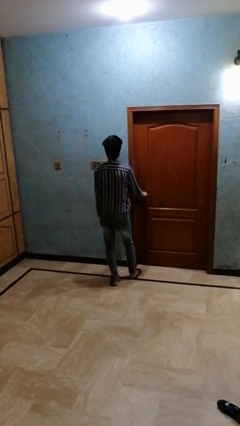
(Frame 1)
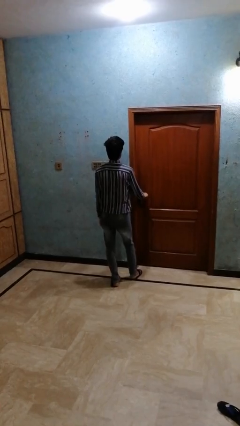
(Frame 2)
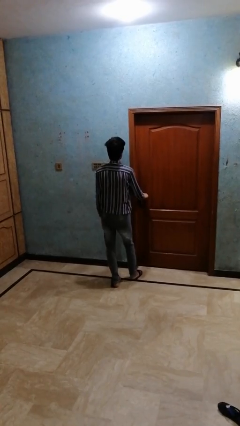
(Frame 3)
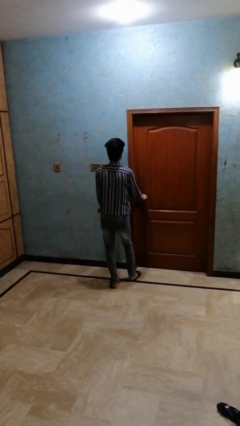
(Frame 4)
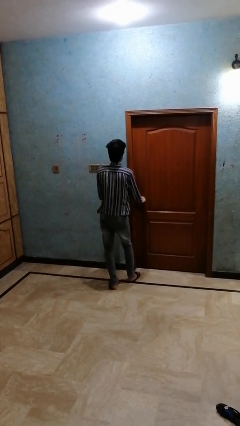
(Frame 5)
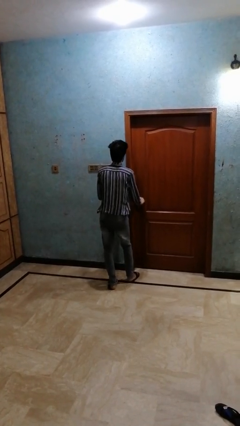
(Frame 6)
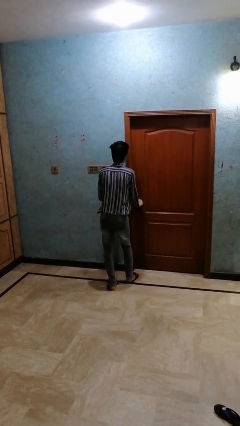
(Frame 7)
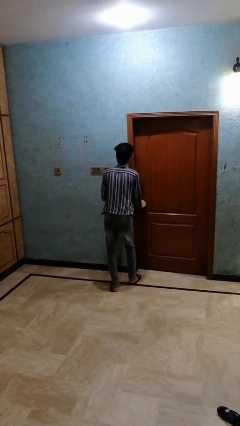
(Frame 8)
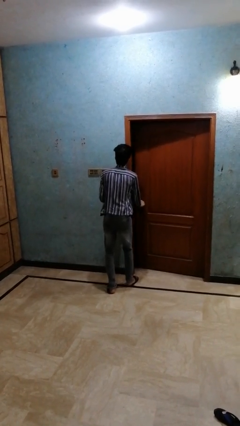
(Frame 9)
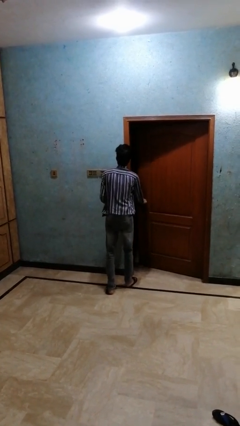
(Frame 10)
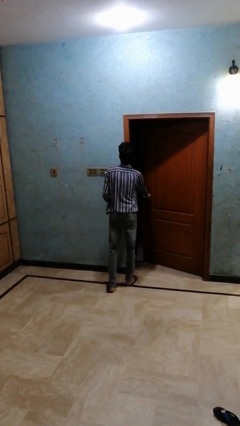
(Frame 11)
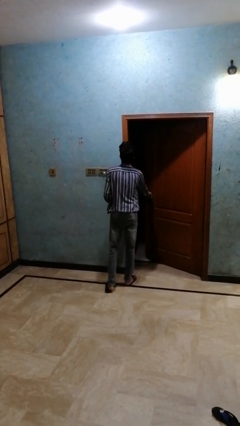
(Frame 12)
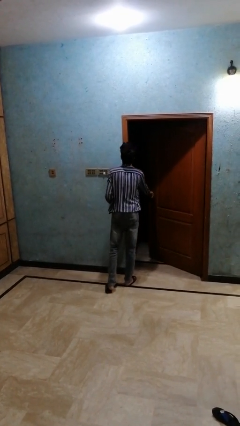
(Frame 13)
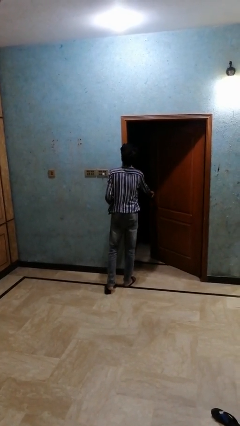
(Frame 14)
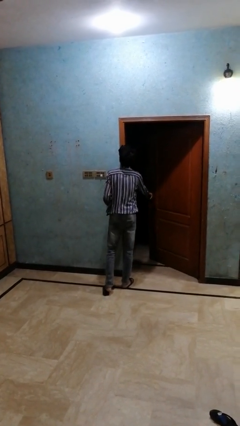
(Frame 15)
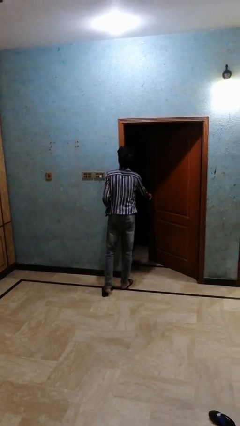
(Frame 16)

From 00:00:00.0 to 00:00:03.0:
person opens closet door

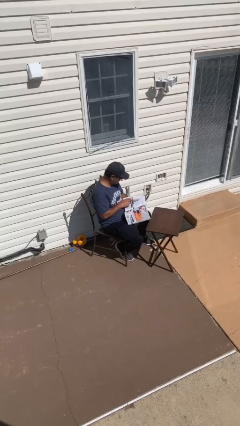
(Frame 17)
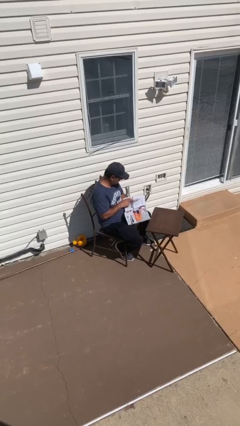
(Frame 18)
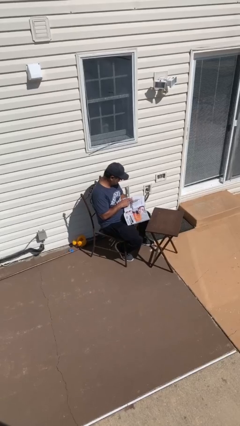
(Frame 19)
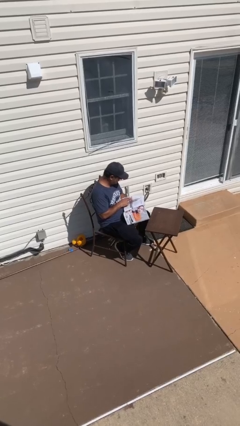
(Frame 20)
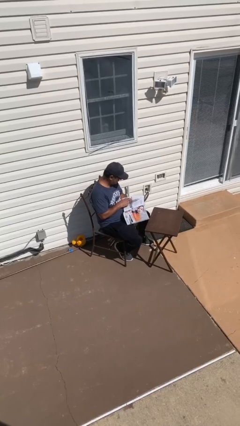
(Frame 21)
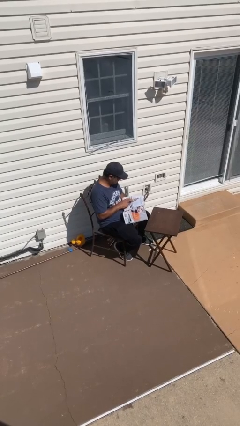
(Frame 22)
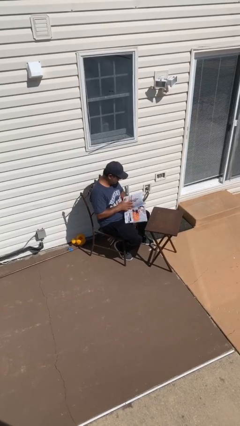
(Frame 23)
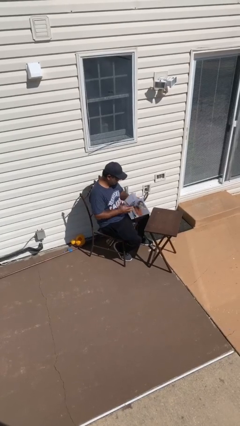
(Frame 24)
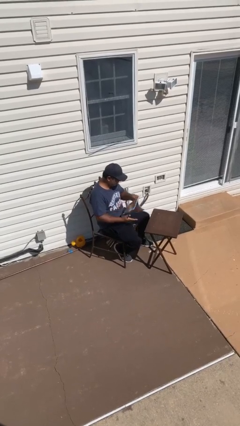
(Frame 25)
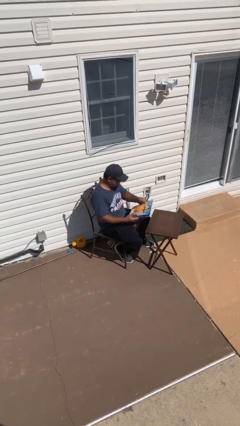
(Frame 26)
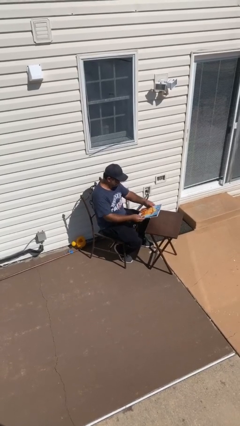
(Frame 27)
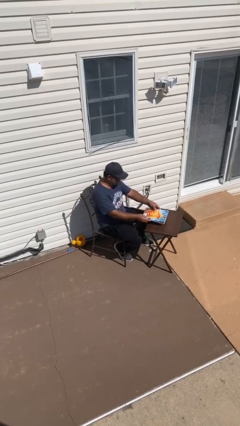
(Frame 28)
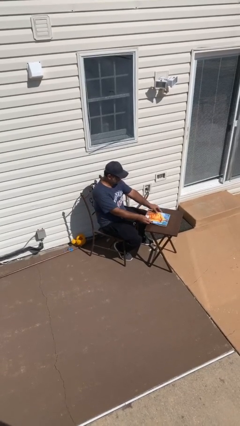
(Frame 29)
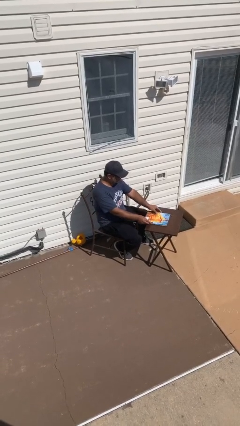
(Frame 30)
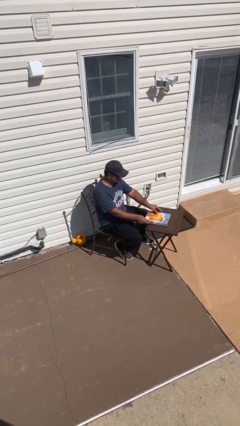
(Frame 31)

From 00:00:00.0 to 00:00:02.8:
person puts down object on table

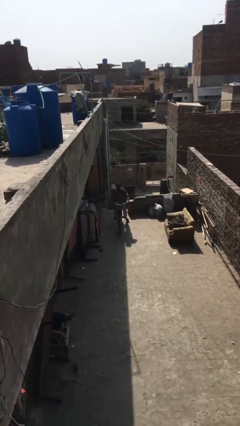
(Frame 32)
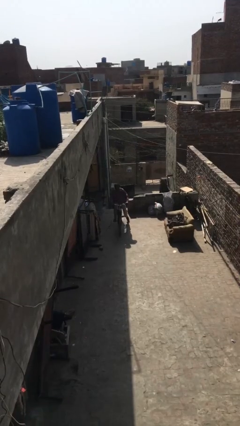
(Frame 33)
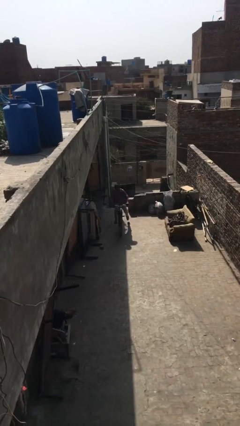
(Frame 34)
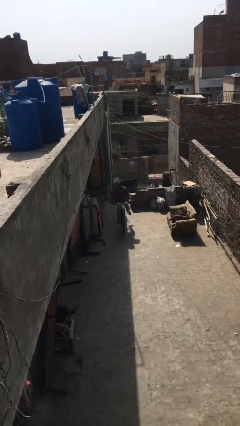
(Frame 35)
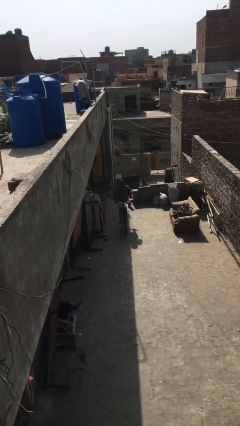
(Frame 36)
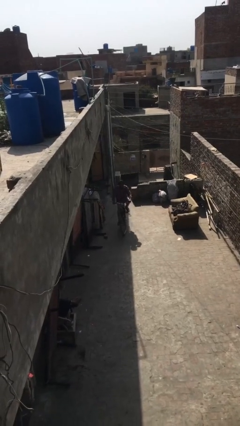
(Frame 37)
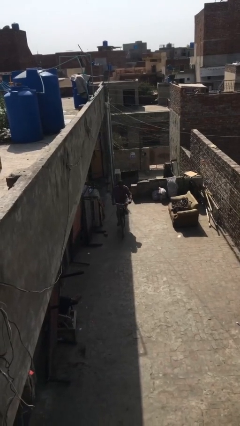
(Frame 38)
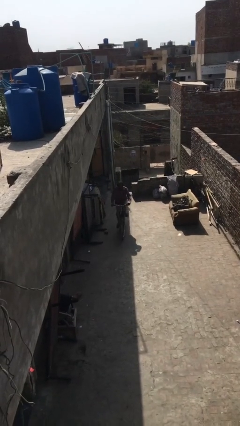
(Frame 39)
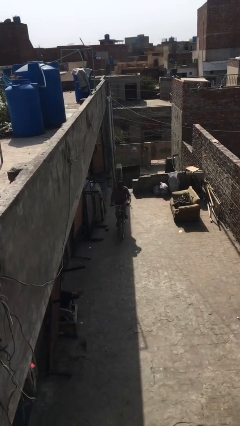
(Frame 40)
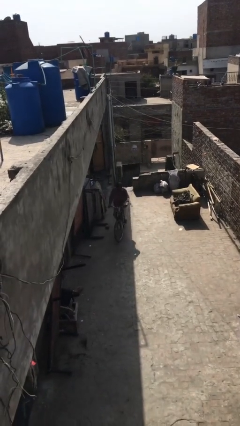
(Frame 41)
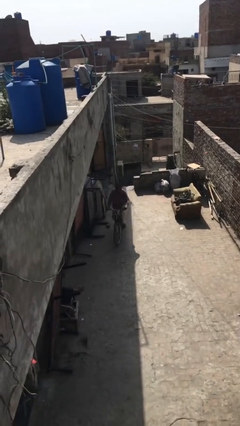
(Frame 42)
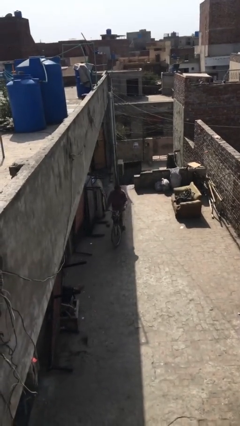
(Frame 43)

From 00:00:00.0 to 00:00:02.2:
person rides bicycle

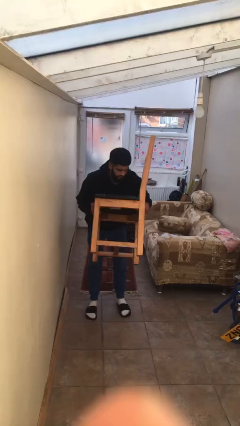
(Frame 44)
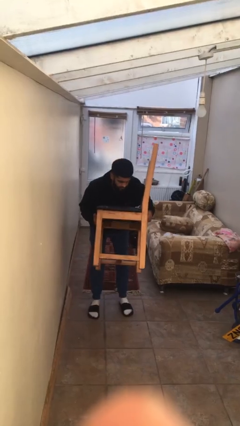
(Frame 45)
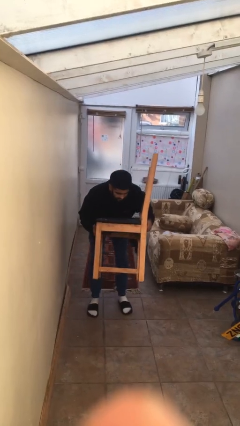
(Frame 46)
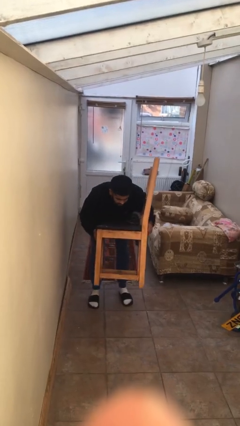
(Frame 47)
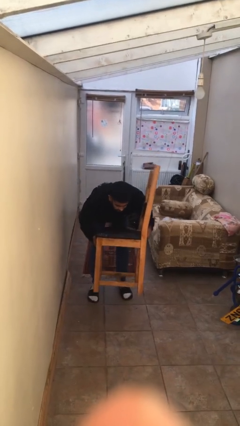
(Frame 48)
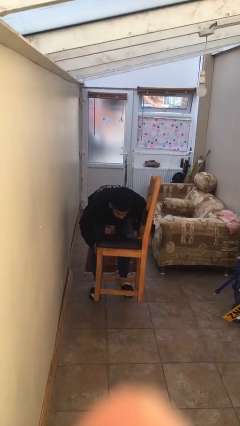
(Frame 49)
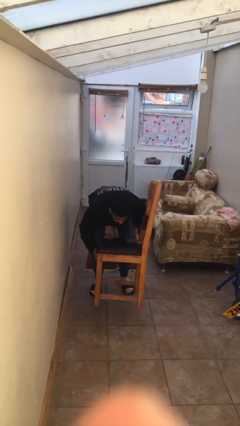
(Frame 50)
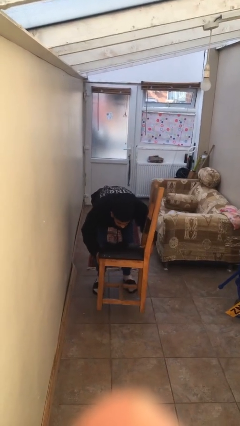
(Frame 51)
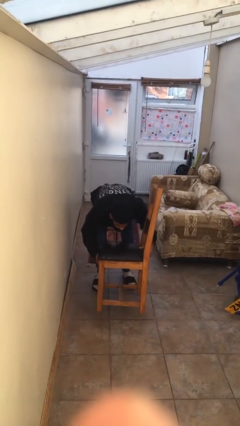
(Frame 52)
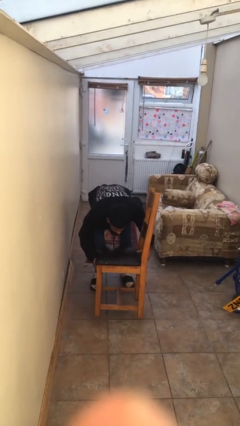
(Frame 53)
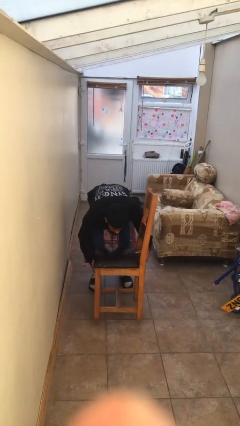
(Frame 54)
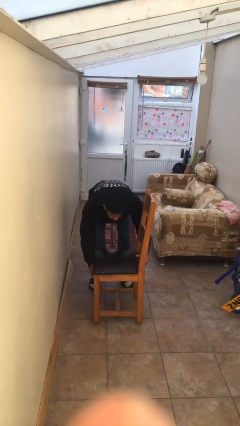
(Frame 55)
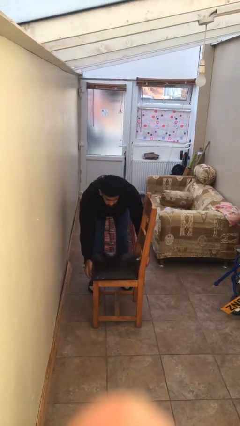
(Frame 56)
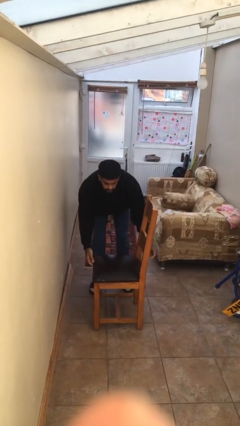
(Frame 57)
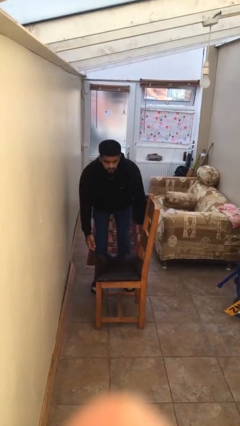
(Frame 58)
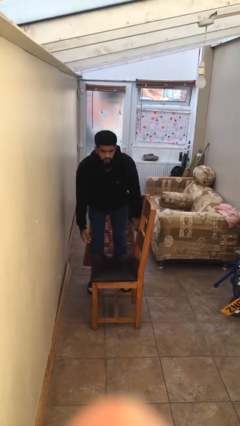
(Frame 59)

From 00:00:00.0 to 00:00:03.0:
person puts down object on floor

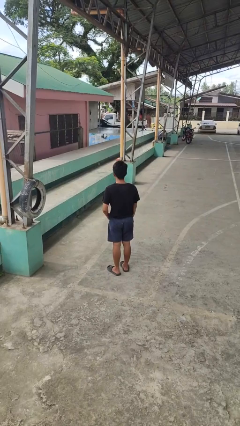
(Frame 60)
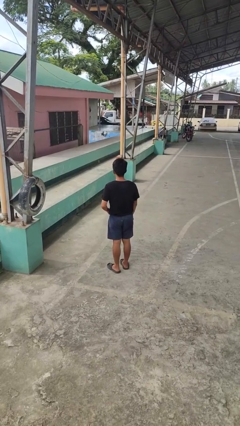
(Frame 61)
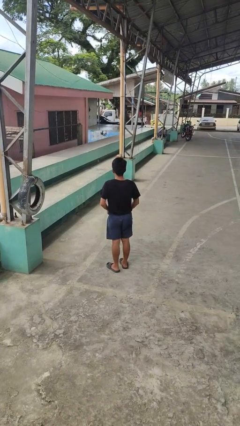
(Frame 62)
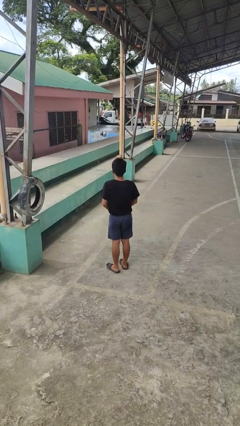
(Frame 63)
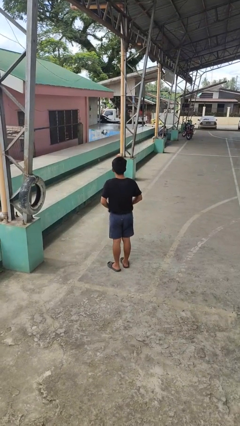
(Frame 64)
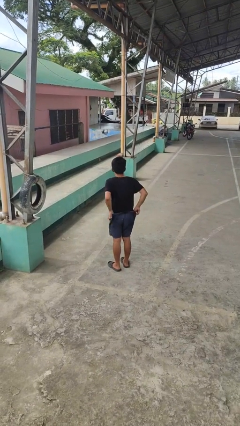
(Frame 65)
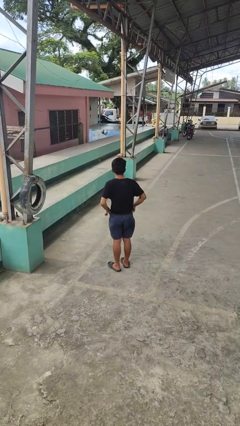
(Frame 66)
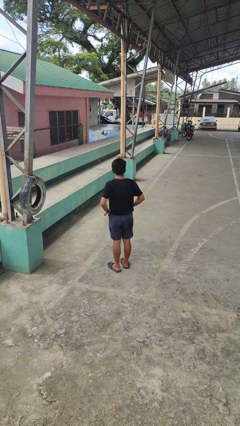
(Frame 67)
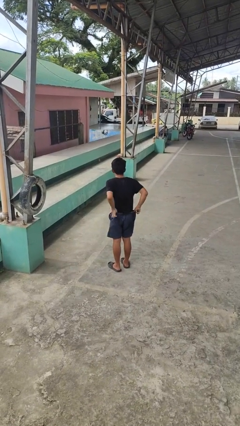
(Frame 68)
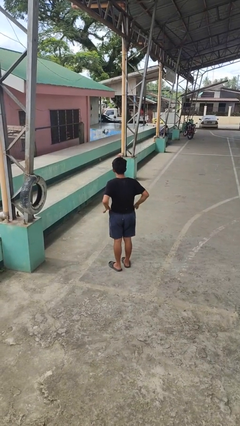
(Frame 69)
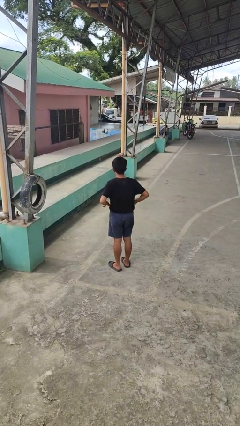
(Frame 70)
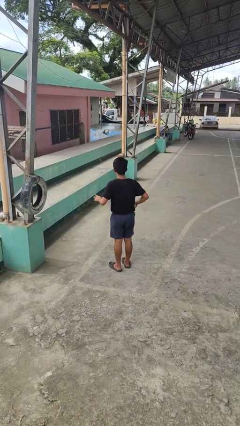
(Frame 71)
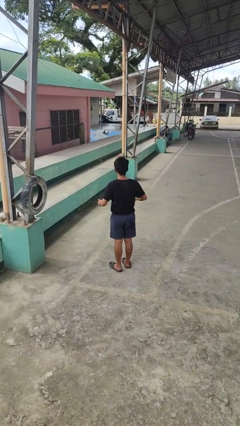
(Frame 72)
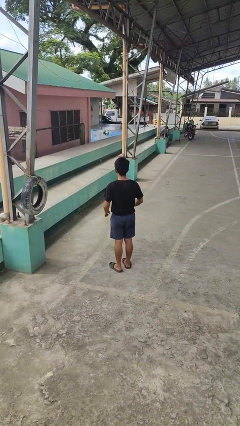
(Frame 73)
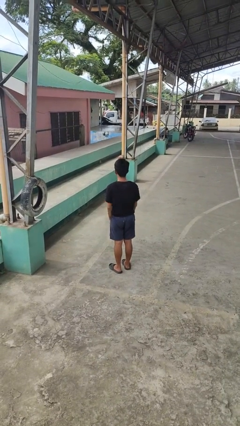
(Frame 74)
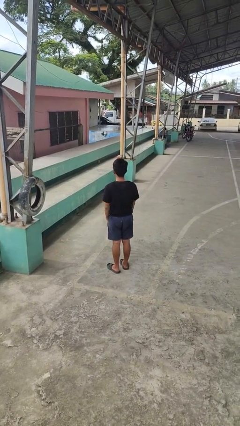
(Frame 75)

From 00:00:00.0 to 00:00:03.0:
person hikes up pants

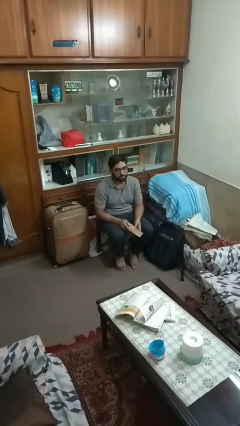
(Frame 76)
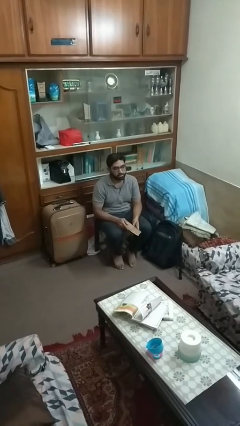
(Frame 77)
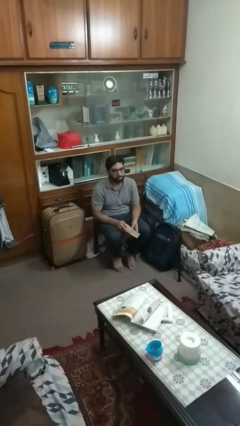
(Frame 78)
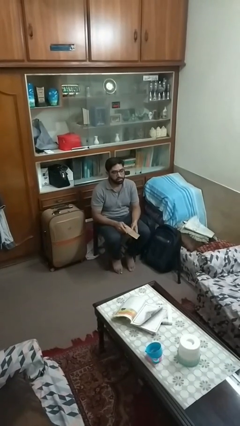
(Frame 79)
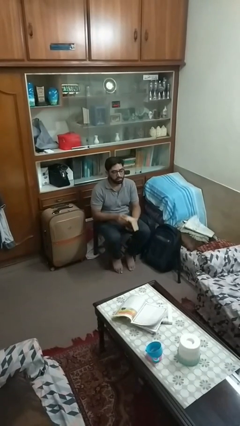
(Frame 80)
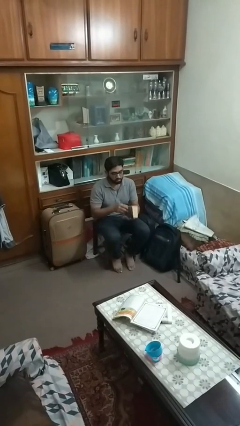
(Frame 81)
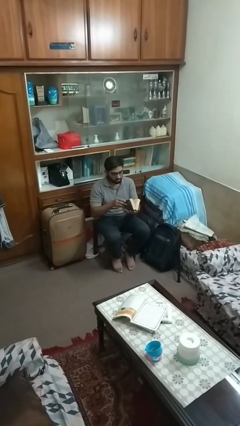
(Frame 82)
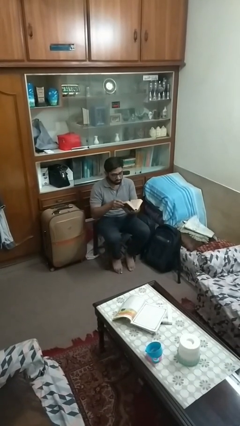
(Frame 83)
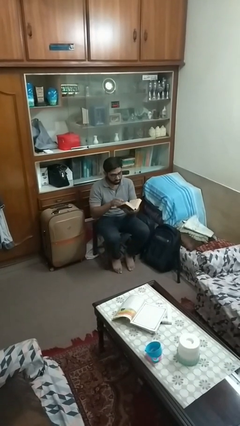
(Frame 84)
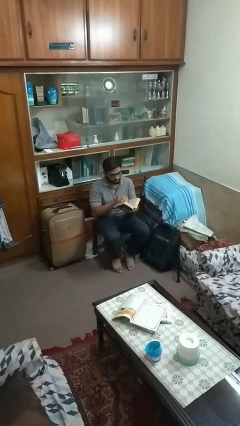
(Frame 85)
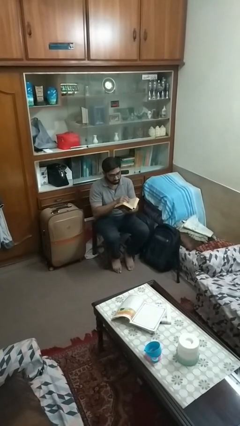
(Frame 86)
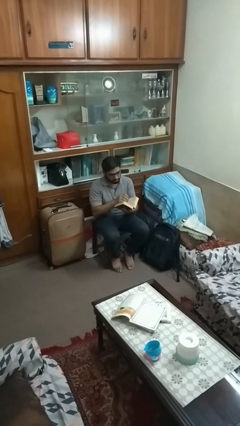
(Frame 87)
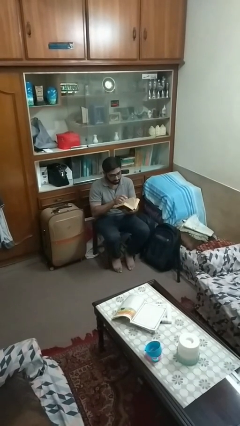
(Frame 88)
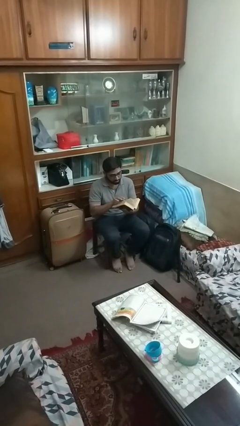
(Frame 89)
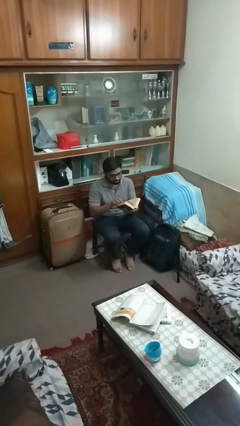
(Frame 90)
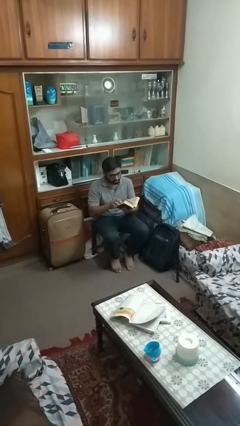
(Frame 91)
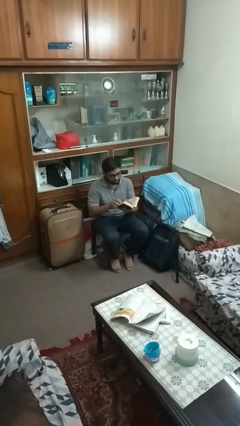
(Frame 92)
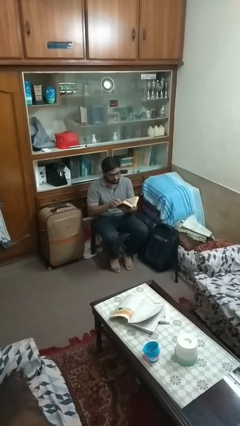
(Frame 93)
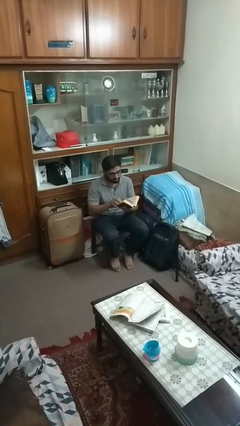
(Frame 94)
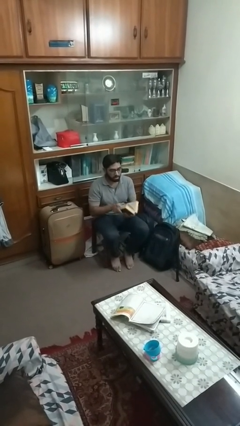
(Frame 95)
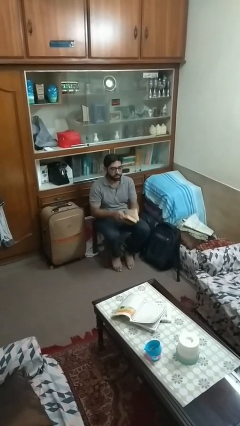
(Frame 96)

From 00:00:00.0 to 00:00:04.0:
person reads book
